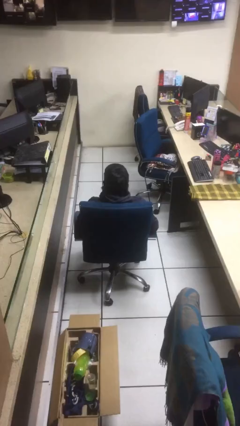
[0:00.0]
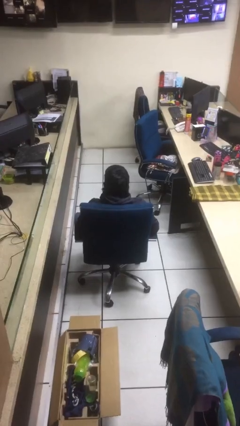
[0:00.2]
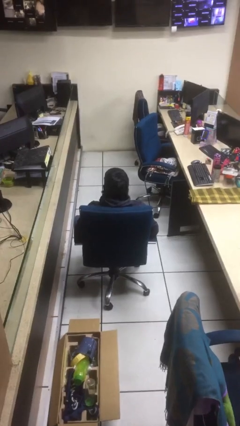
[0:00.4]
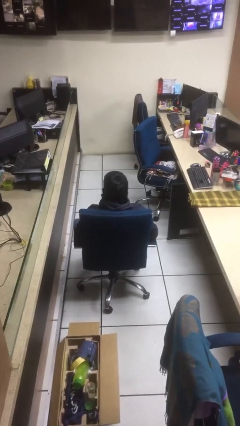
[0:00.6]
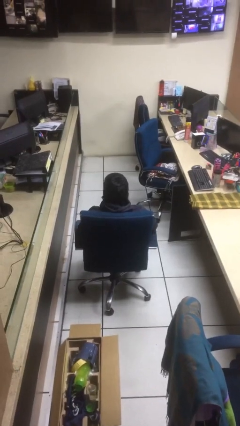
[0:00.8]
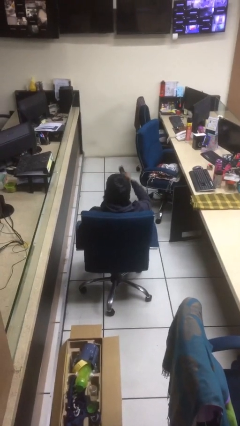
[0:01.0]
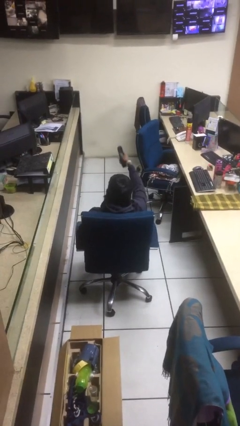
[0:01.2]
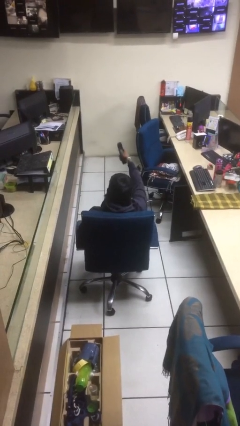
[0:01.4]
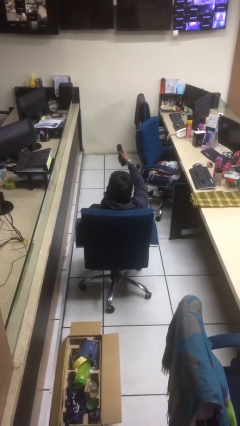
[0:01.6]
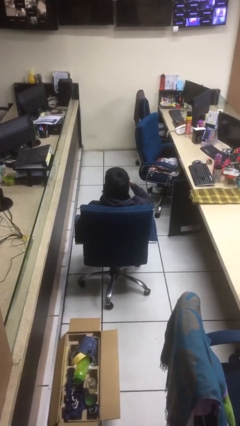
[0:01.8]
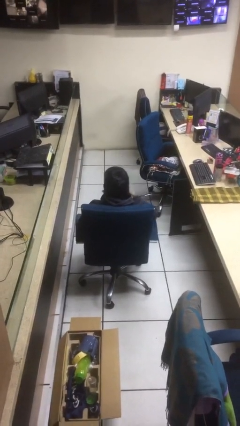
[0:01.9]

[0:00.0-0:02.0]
person uses television remote

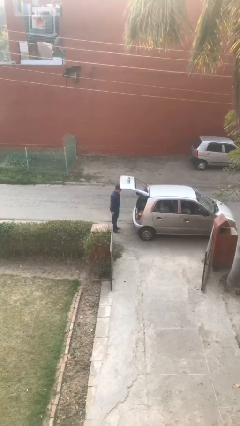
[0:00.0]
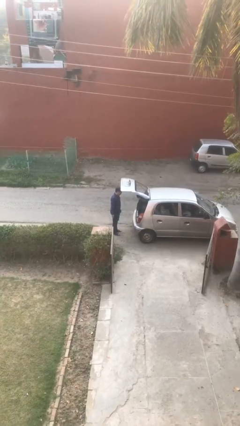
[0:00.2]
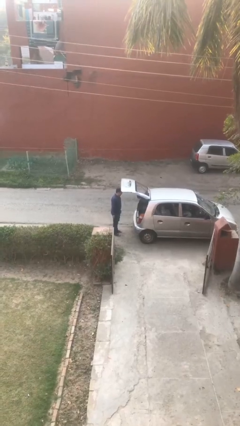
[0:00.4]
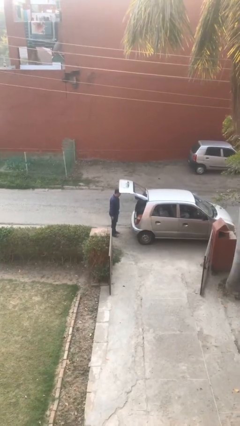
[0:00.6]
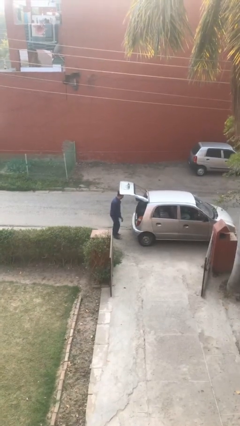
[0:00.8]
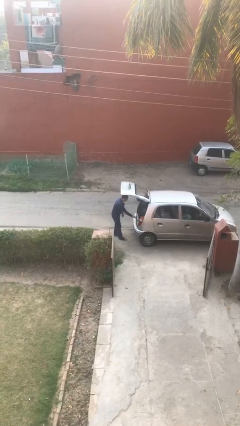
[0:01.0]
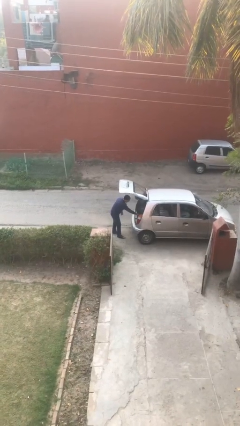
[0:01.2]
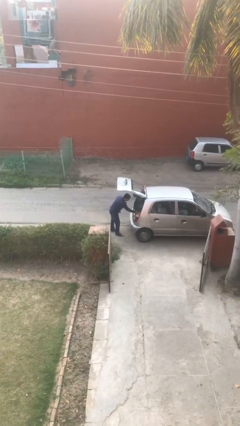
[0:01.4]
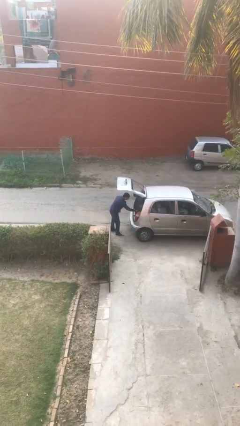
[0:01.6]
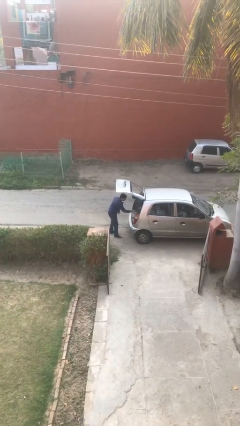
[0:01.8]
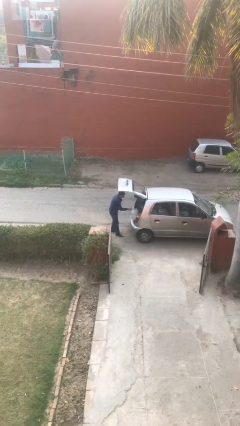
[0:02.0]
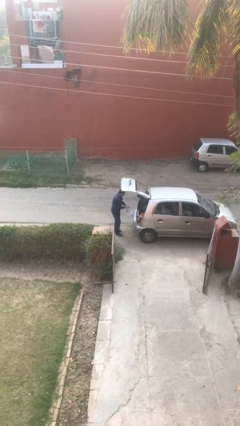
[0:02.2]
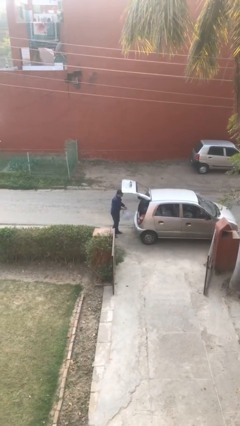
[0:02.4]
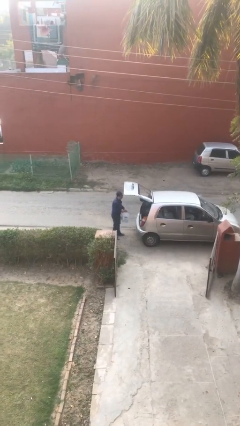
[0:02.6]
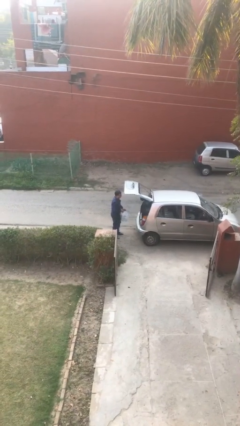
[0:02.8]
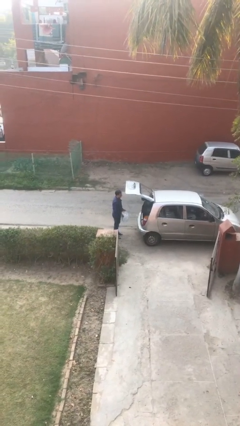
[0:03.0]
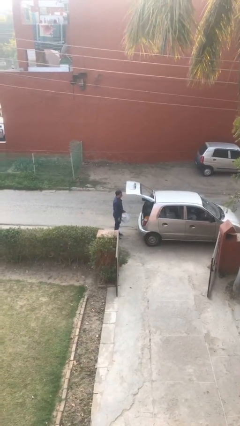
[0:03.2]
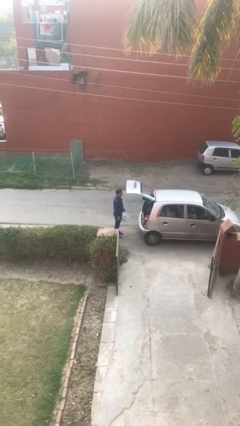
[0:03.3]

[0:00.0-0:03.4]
person unloads car

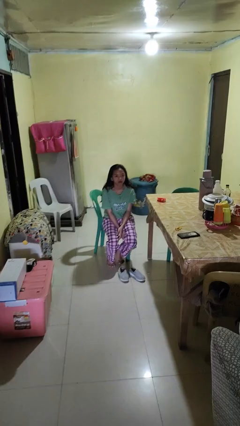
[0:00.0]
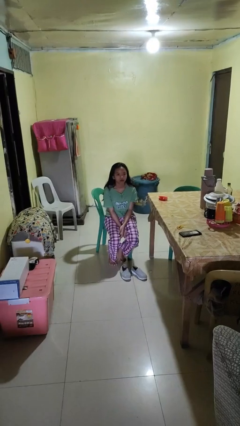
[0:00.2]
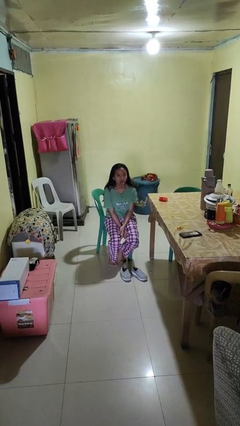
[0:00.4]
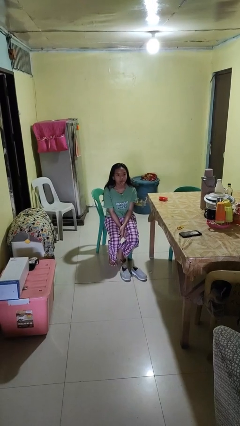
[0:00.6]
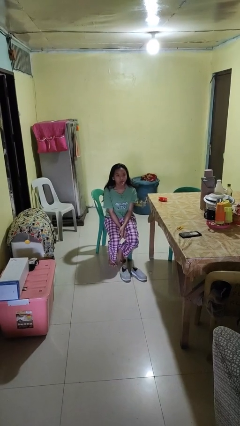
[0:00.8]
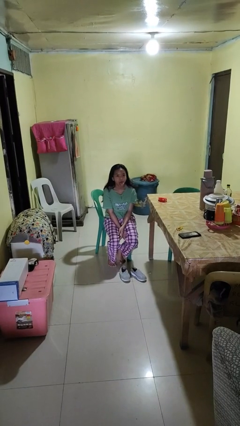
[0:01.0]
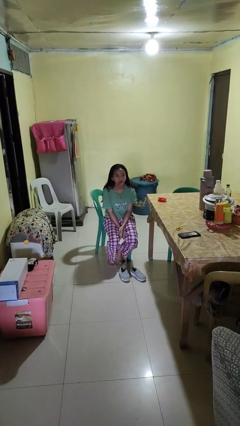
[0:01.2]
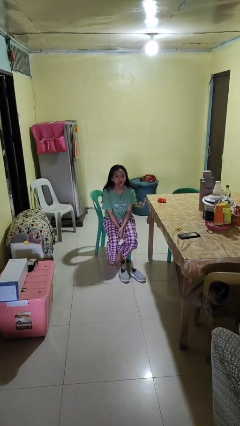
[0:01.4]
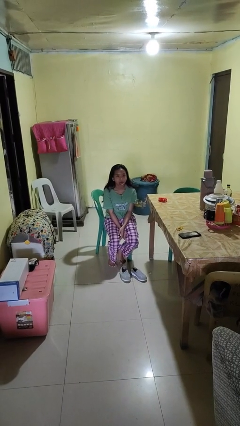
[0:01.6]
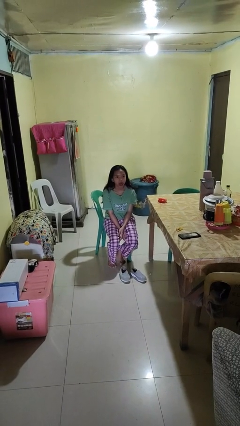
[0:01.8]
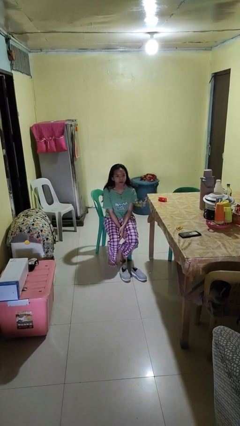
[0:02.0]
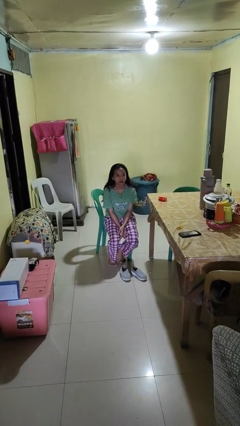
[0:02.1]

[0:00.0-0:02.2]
person sticks out tongue

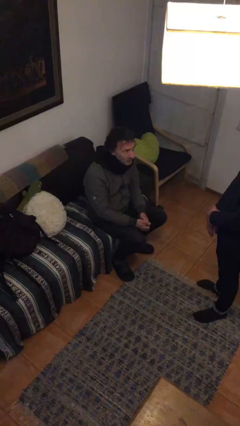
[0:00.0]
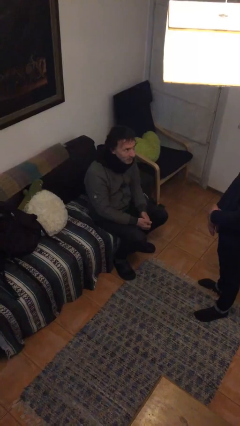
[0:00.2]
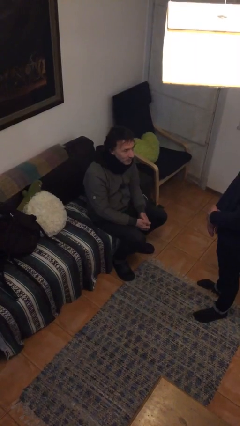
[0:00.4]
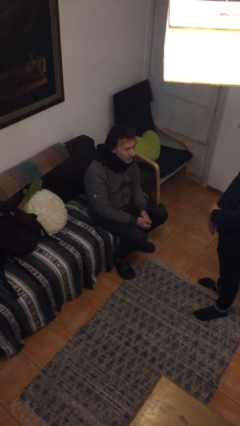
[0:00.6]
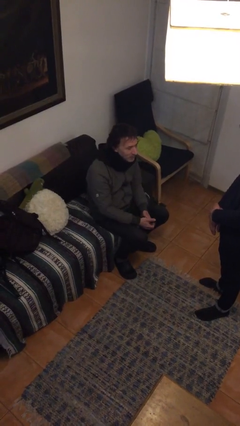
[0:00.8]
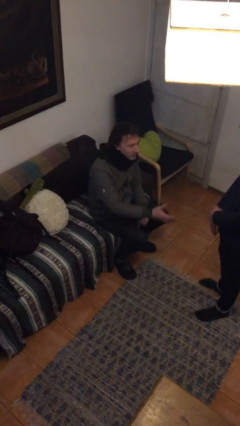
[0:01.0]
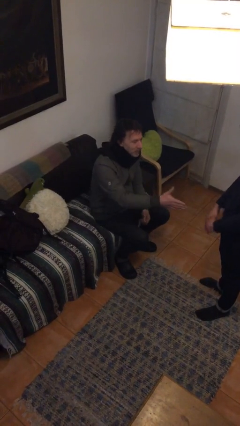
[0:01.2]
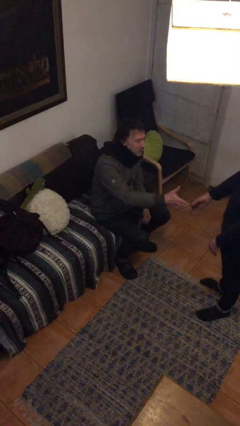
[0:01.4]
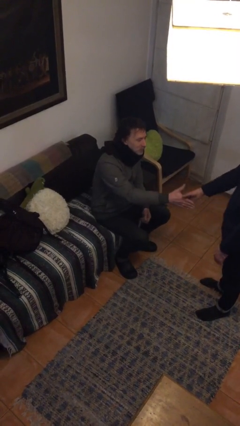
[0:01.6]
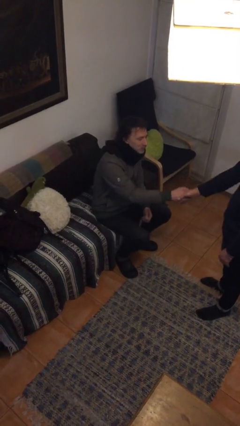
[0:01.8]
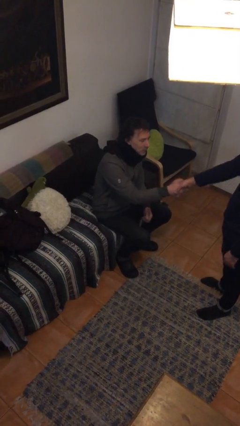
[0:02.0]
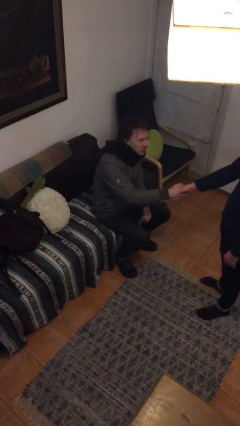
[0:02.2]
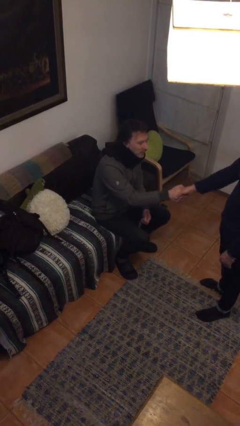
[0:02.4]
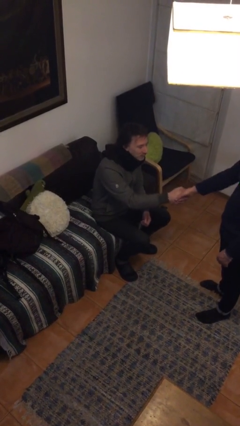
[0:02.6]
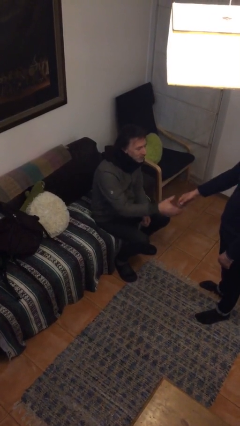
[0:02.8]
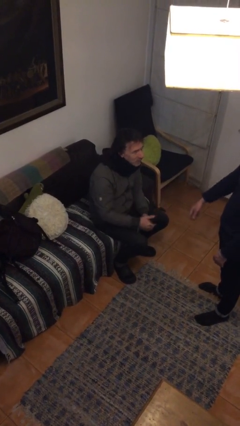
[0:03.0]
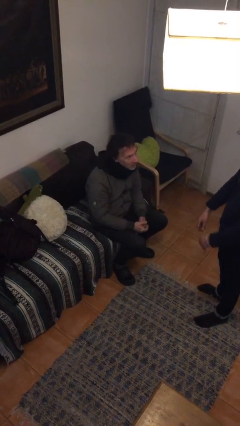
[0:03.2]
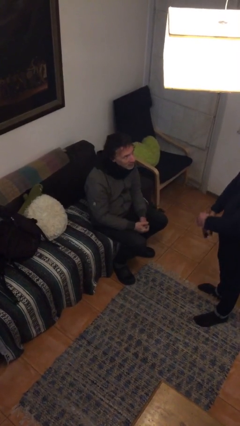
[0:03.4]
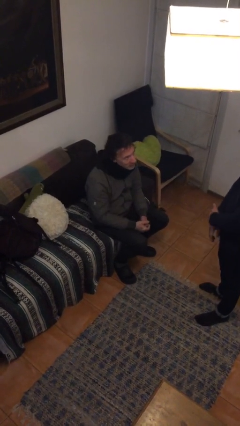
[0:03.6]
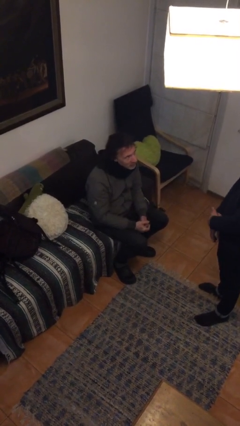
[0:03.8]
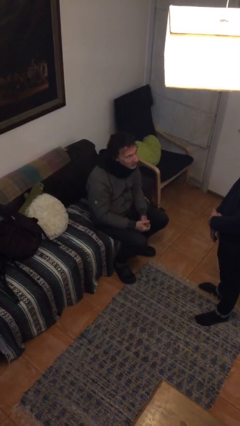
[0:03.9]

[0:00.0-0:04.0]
person shakes hand

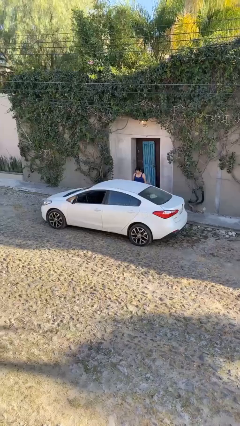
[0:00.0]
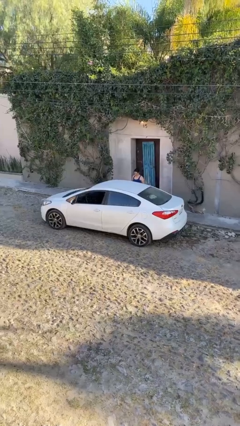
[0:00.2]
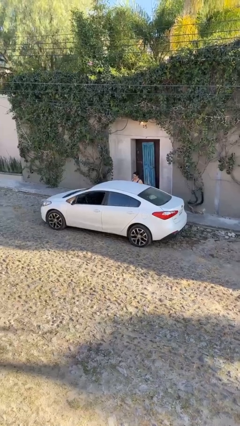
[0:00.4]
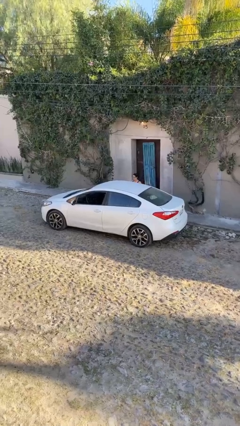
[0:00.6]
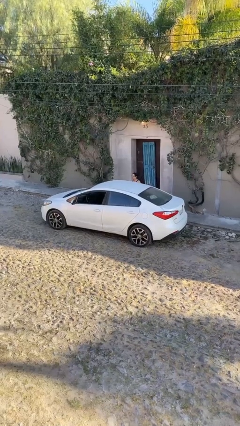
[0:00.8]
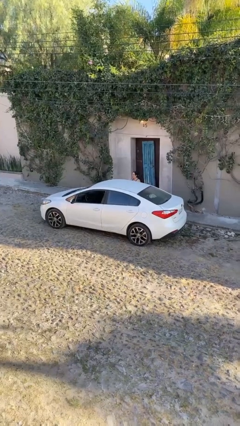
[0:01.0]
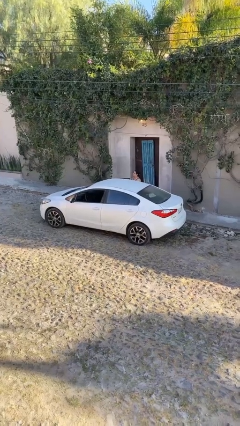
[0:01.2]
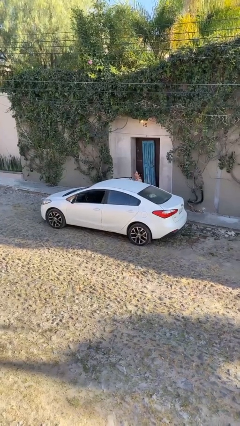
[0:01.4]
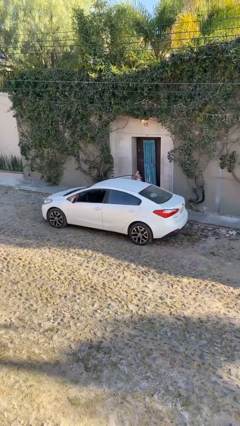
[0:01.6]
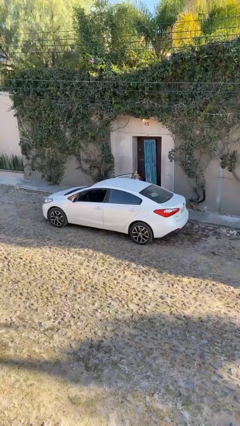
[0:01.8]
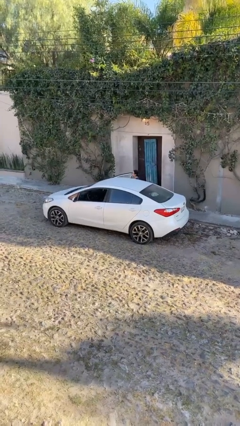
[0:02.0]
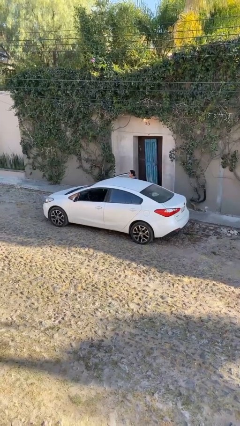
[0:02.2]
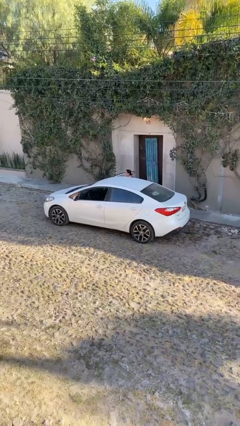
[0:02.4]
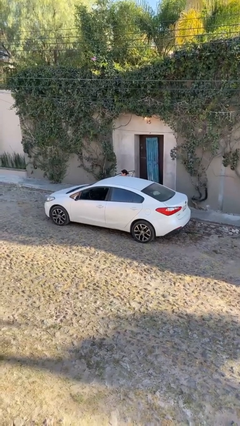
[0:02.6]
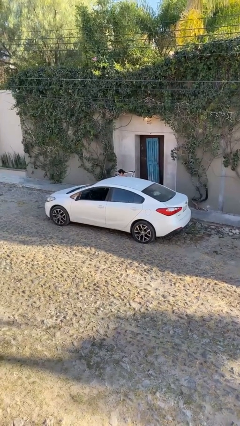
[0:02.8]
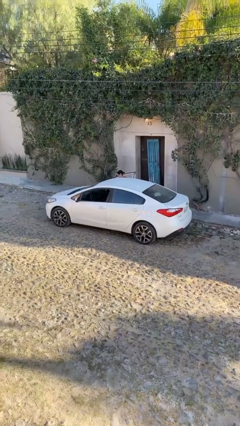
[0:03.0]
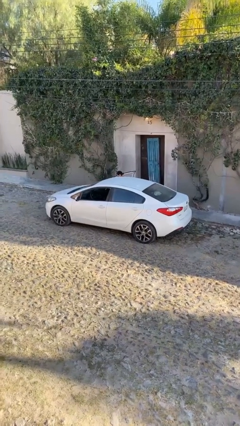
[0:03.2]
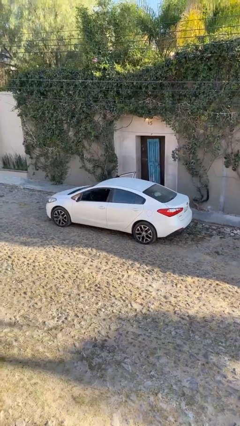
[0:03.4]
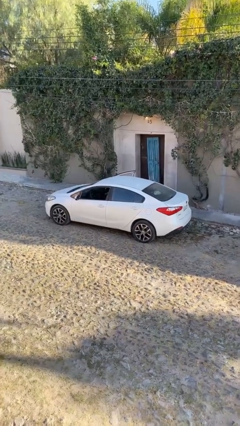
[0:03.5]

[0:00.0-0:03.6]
car picks up person

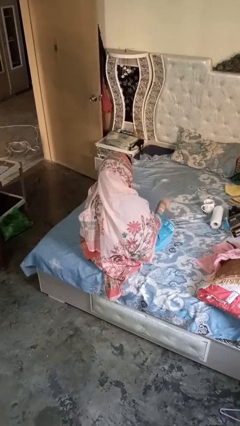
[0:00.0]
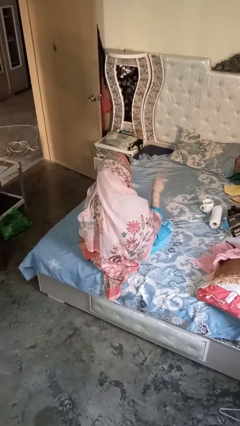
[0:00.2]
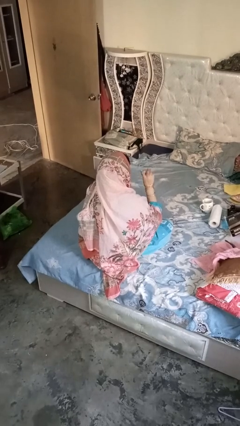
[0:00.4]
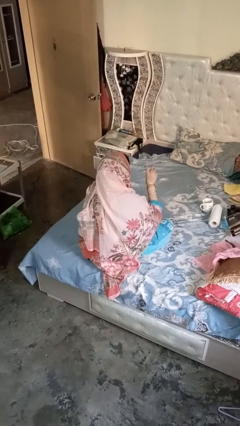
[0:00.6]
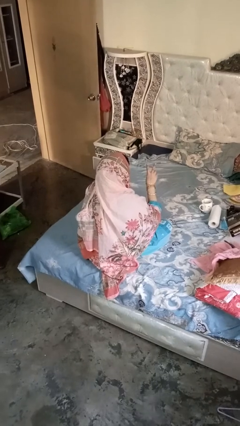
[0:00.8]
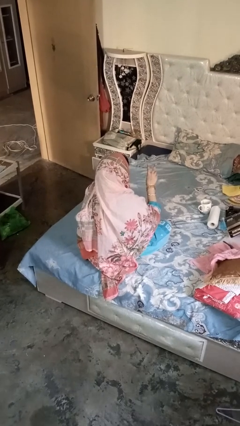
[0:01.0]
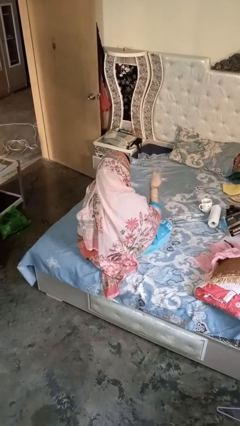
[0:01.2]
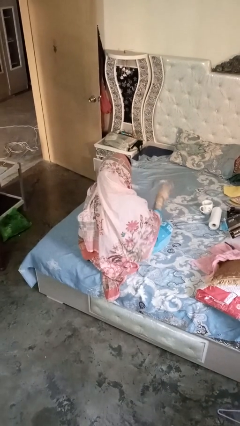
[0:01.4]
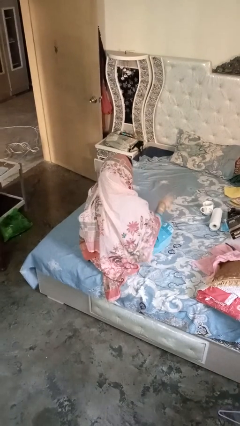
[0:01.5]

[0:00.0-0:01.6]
person gestures be quiet

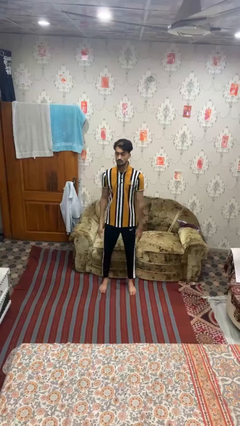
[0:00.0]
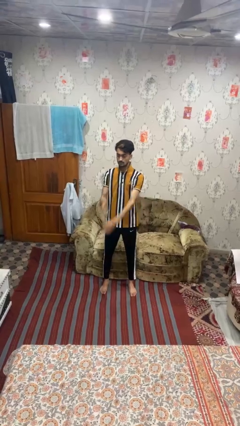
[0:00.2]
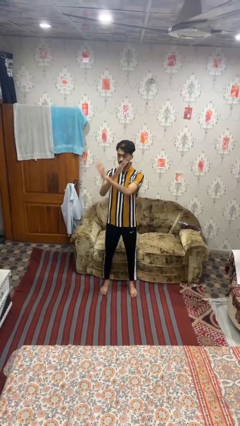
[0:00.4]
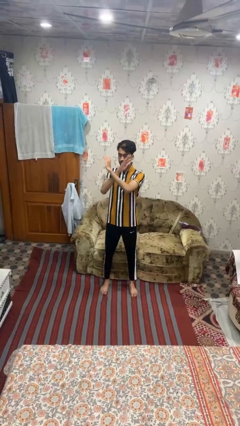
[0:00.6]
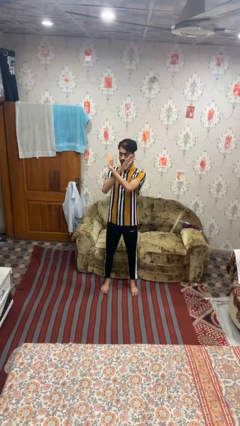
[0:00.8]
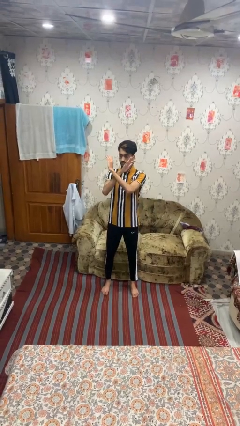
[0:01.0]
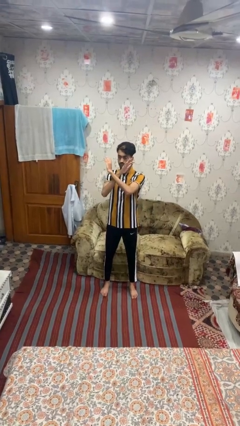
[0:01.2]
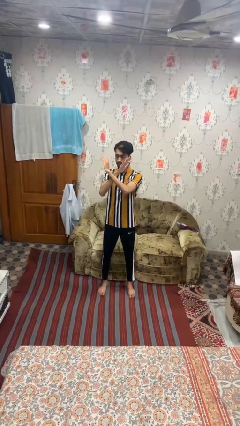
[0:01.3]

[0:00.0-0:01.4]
person gestures arms x
